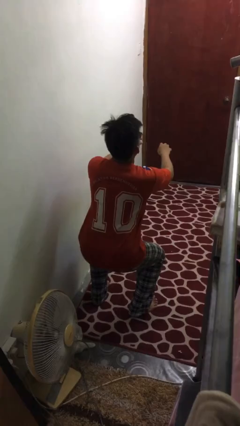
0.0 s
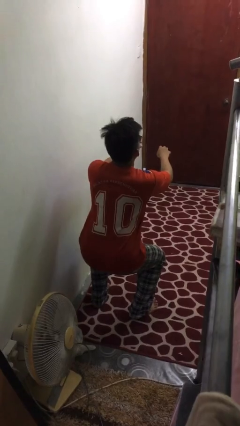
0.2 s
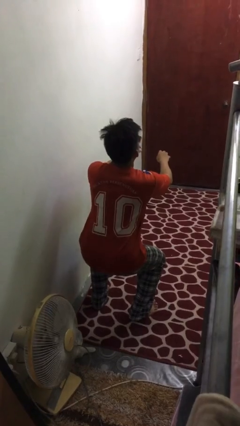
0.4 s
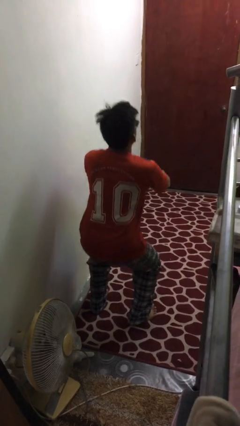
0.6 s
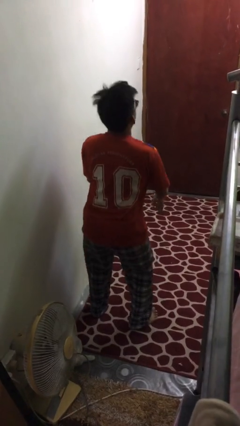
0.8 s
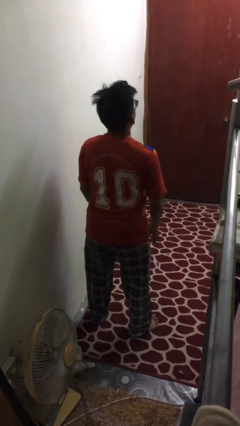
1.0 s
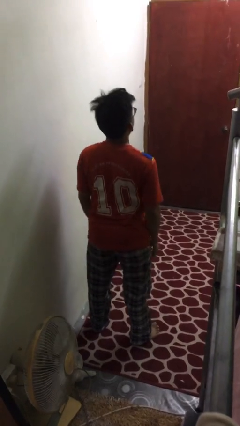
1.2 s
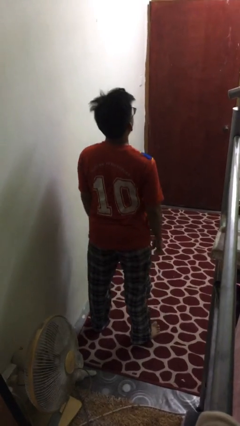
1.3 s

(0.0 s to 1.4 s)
person stands up

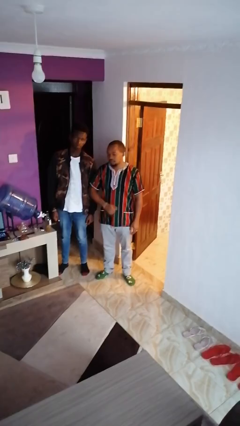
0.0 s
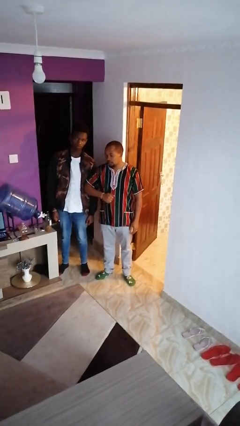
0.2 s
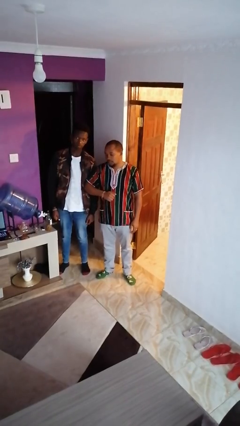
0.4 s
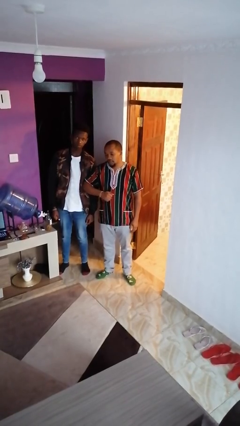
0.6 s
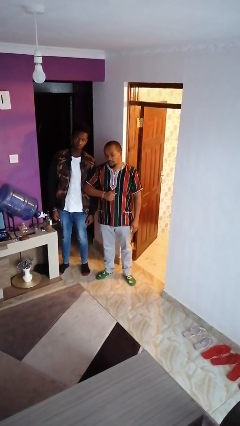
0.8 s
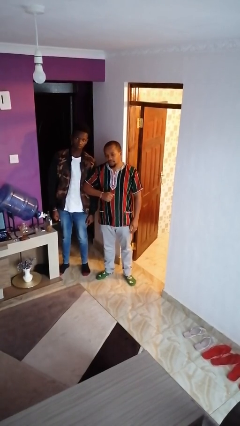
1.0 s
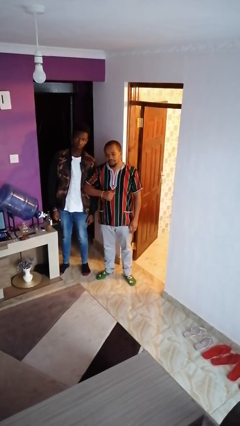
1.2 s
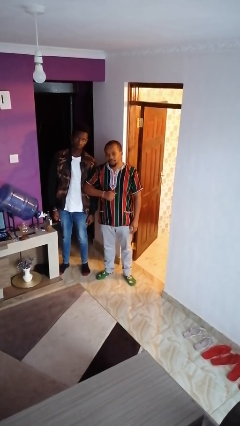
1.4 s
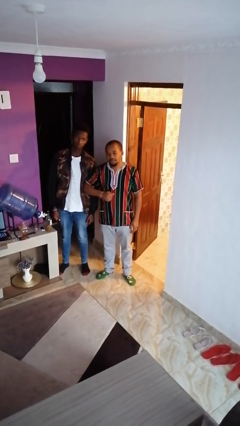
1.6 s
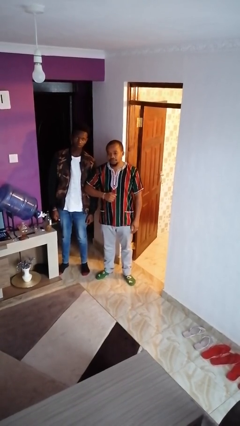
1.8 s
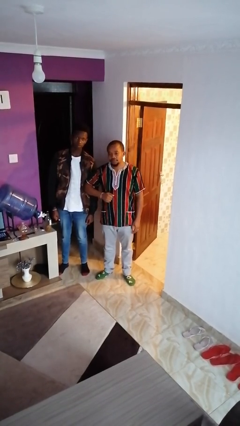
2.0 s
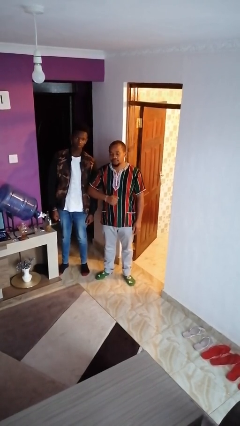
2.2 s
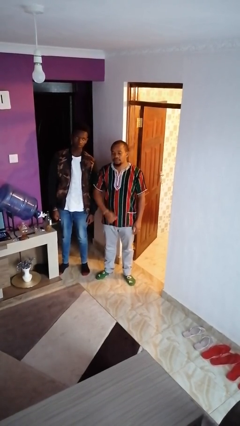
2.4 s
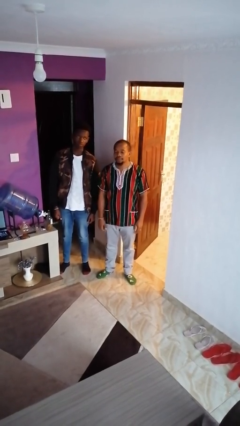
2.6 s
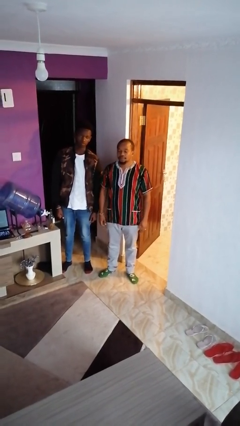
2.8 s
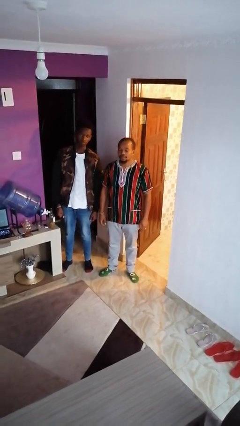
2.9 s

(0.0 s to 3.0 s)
person nudges person with elbow

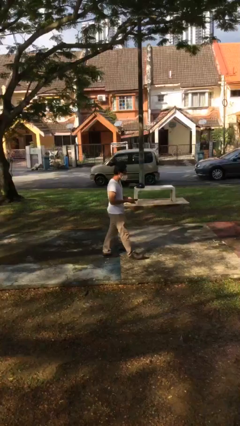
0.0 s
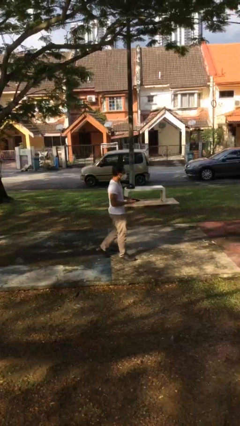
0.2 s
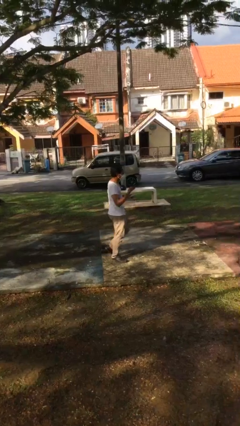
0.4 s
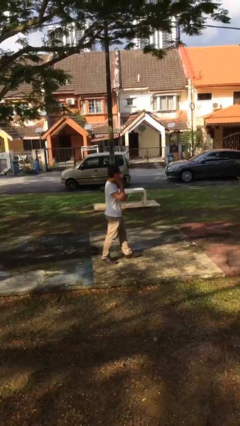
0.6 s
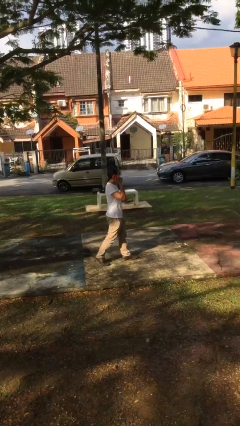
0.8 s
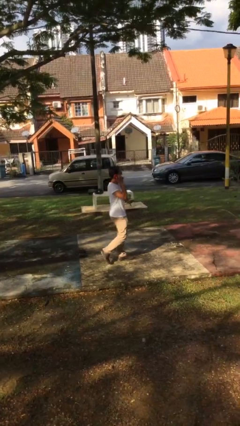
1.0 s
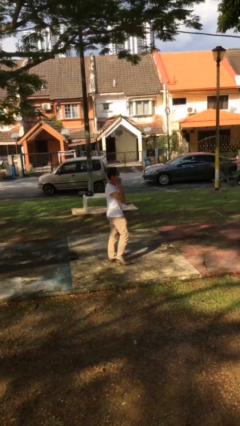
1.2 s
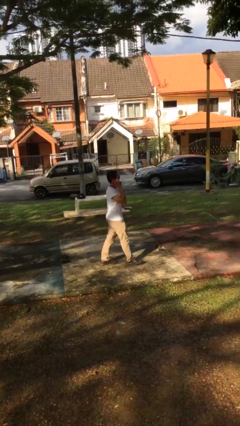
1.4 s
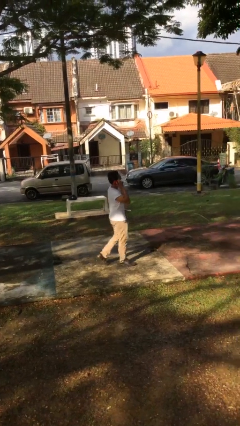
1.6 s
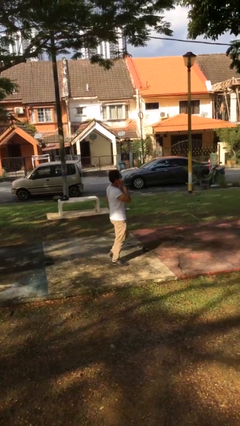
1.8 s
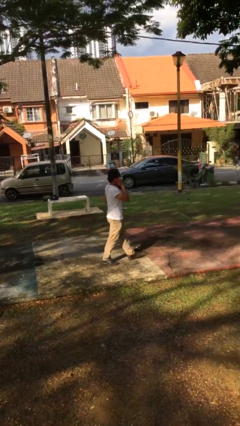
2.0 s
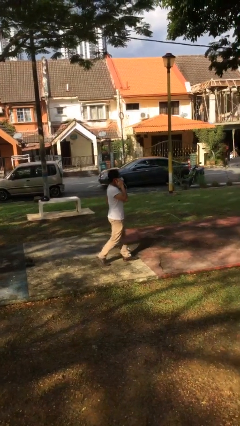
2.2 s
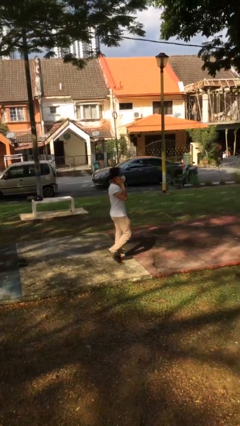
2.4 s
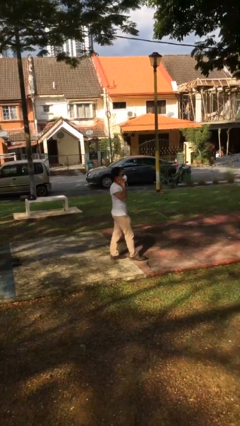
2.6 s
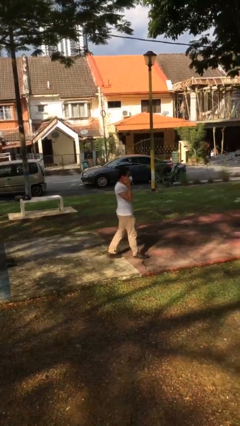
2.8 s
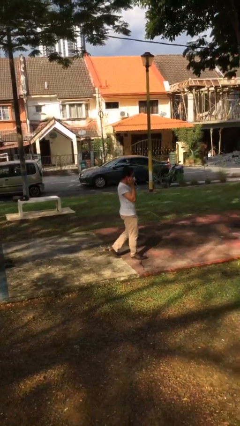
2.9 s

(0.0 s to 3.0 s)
person talks on phone

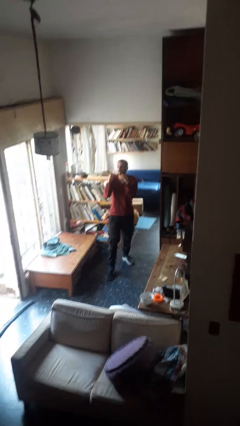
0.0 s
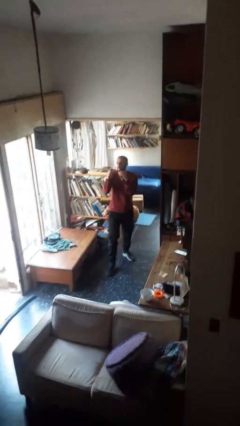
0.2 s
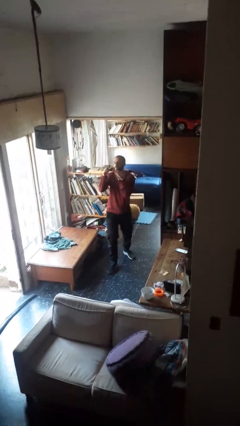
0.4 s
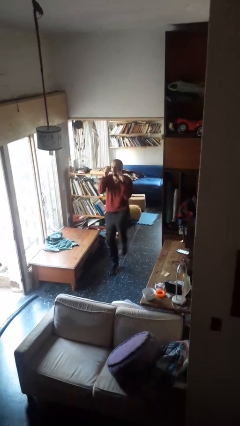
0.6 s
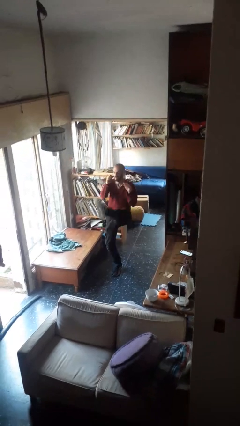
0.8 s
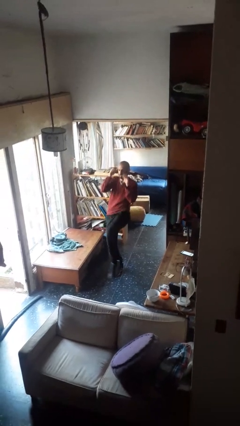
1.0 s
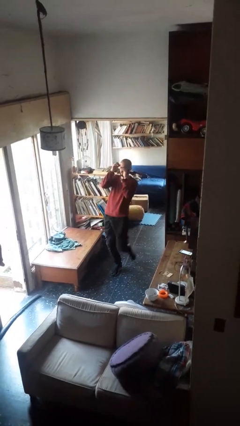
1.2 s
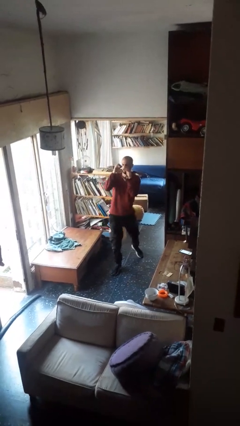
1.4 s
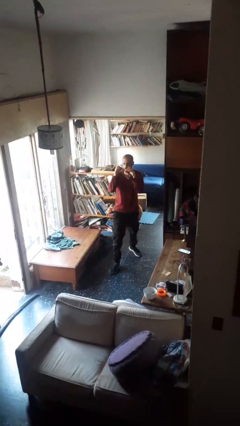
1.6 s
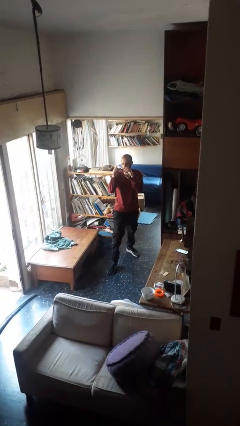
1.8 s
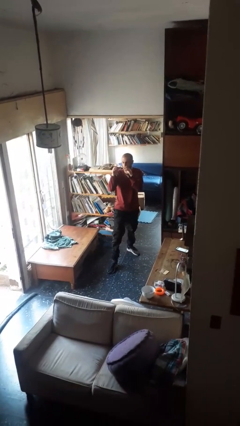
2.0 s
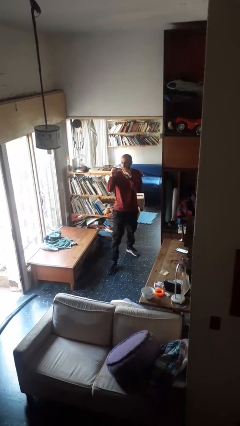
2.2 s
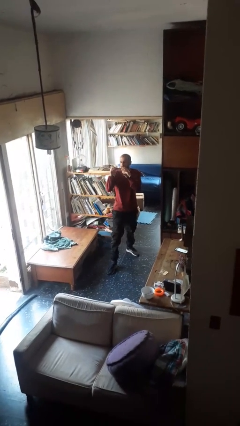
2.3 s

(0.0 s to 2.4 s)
person karate kicks

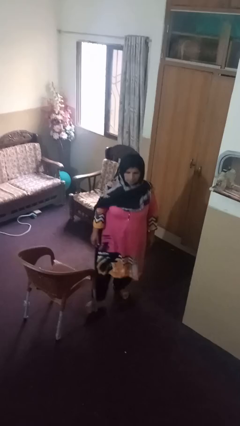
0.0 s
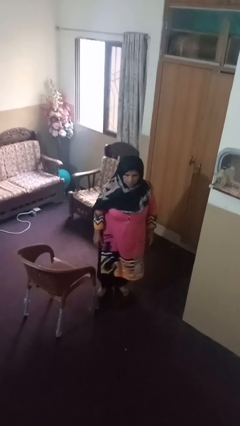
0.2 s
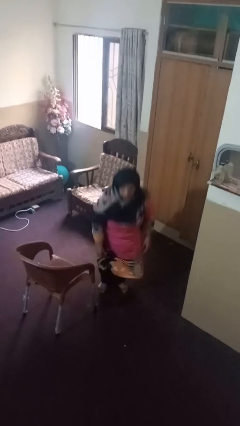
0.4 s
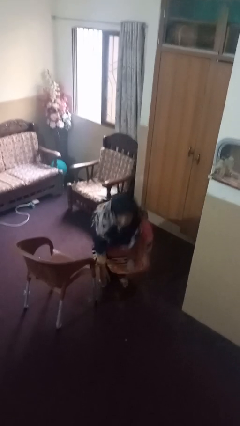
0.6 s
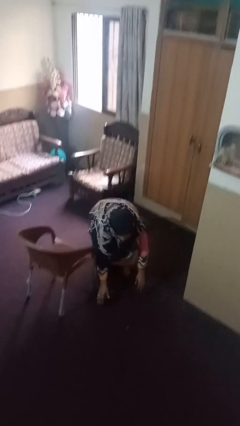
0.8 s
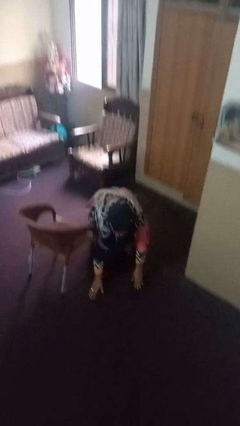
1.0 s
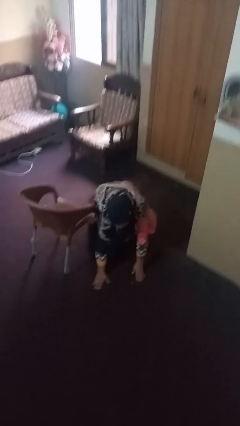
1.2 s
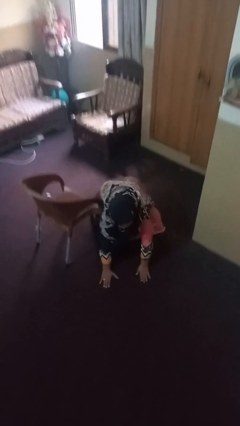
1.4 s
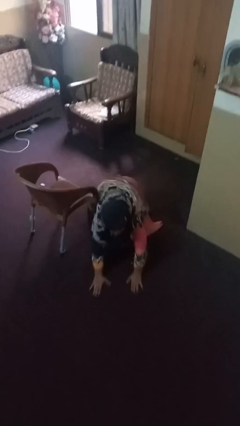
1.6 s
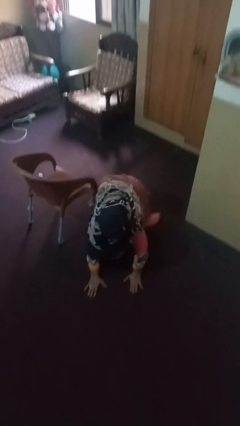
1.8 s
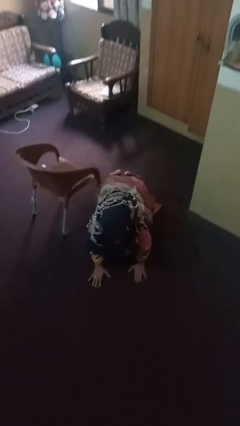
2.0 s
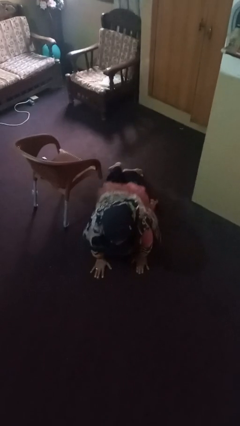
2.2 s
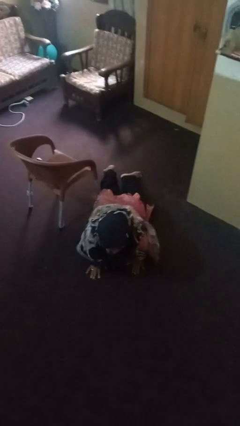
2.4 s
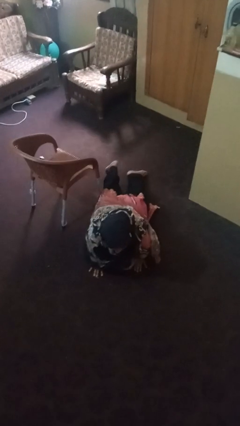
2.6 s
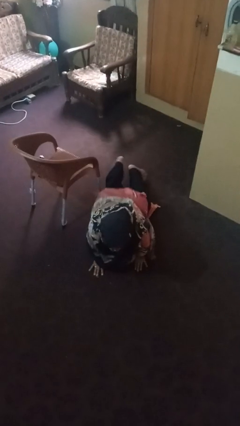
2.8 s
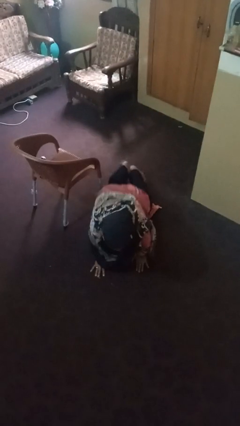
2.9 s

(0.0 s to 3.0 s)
person lies down on floor

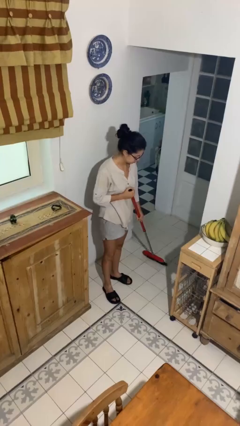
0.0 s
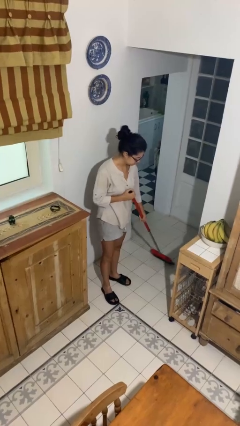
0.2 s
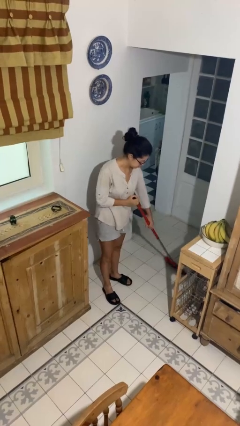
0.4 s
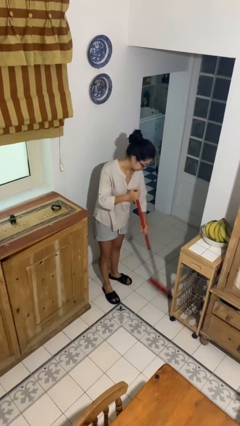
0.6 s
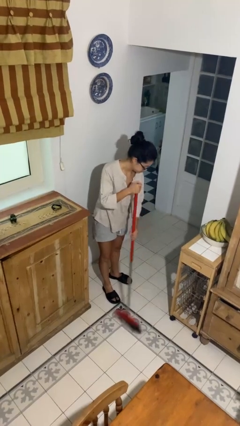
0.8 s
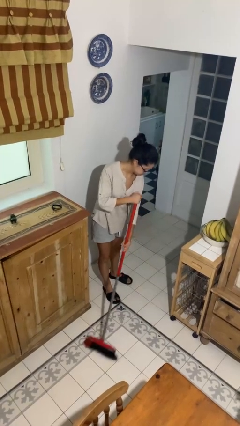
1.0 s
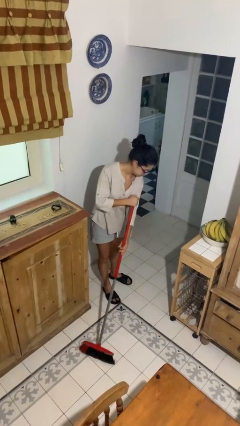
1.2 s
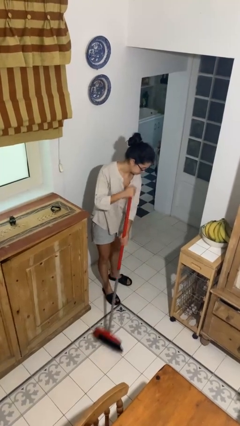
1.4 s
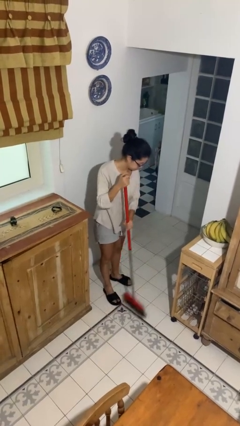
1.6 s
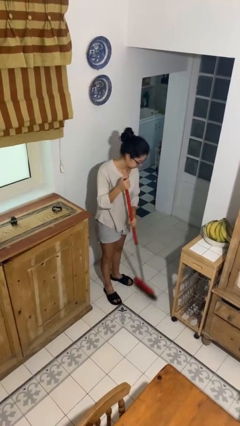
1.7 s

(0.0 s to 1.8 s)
person sweeps floor

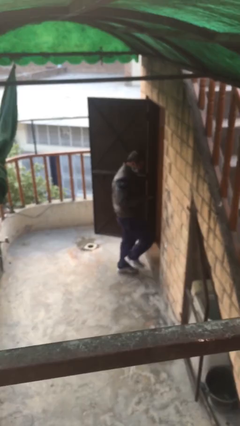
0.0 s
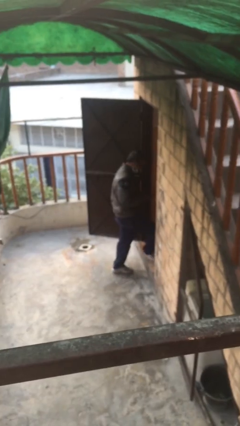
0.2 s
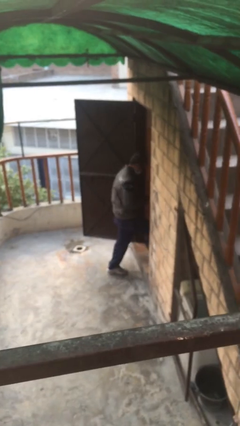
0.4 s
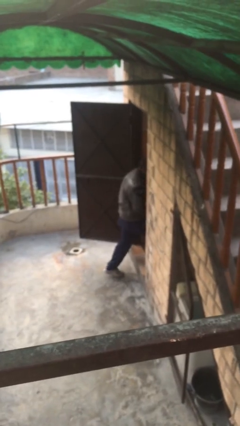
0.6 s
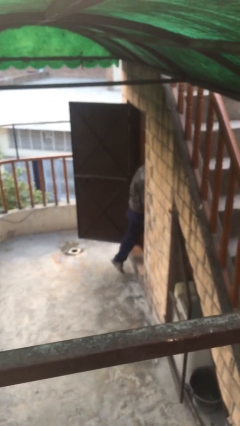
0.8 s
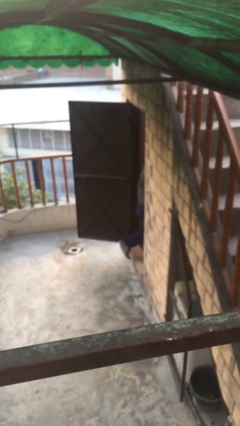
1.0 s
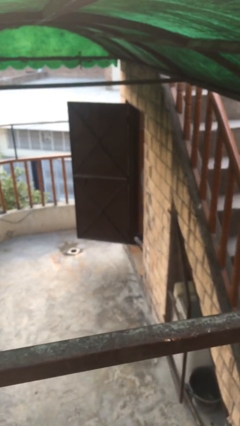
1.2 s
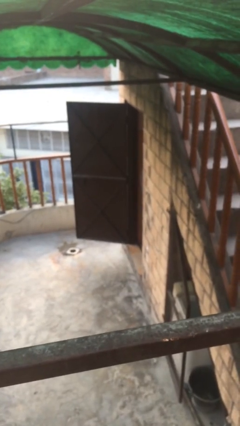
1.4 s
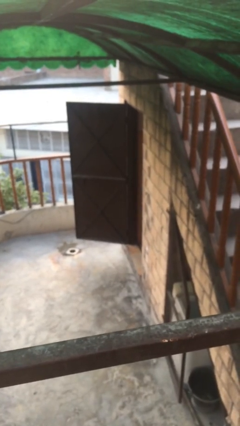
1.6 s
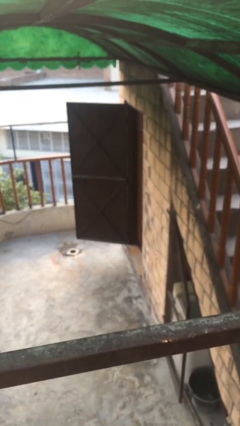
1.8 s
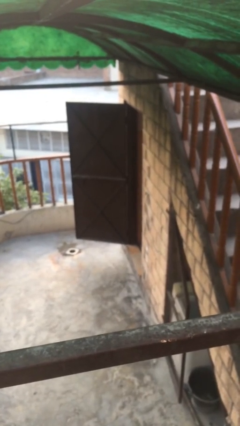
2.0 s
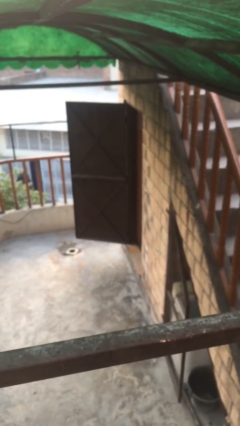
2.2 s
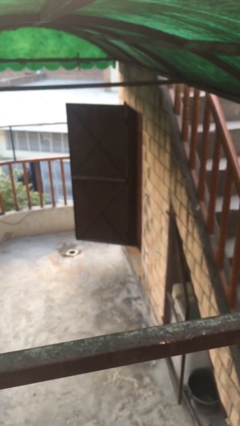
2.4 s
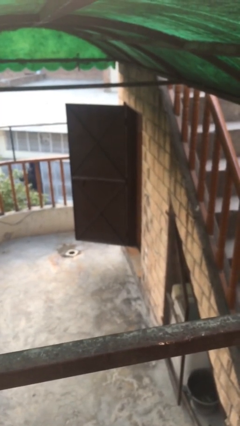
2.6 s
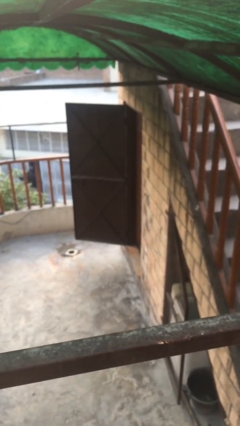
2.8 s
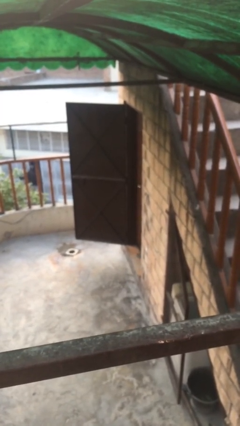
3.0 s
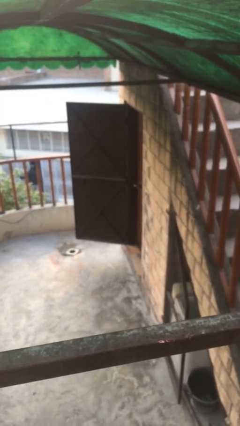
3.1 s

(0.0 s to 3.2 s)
person exits scene through structure
